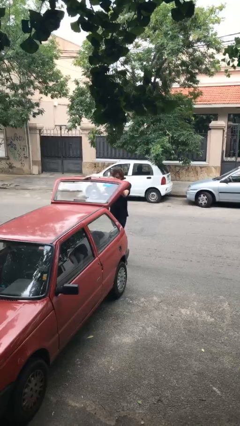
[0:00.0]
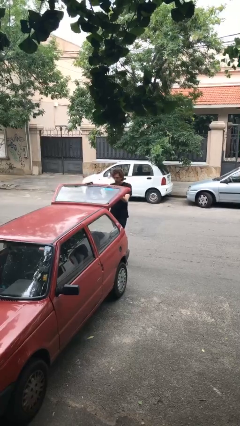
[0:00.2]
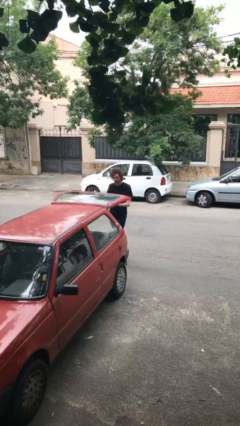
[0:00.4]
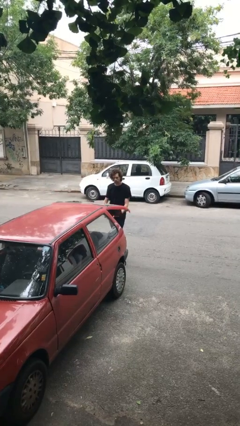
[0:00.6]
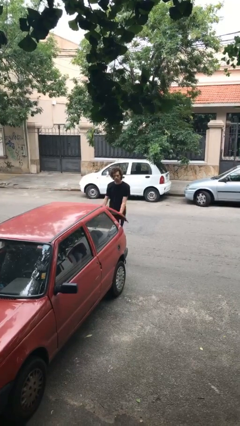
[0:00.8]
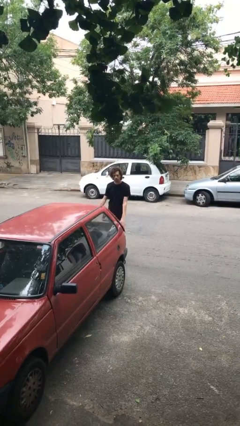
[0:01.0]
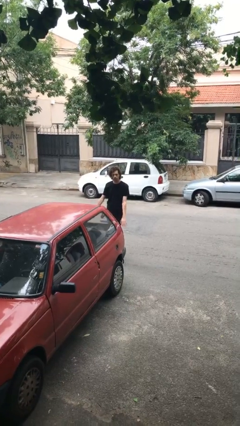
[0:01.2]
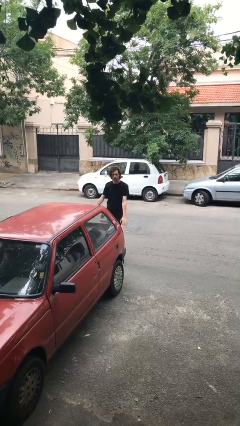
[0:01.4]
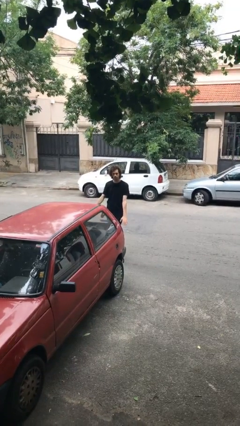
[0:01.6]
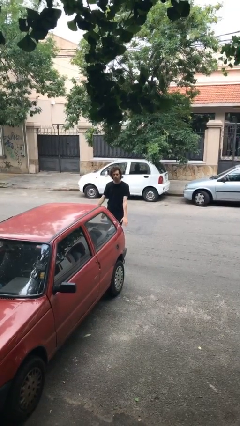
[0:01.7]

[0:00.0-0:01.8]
person closes car trunk

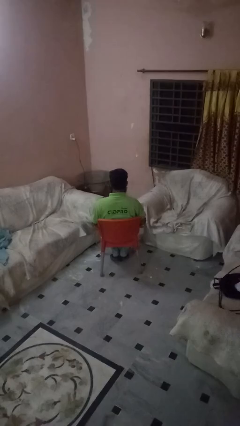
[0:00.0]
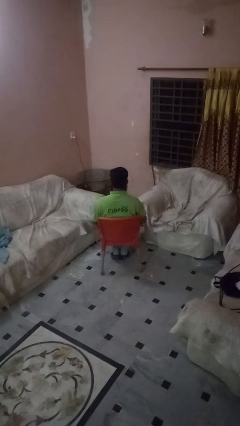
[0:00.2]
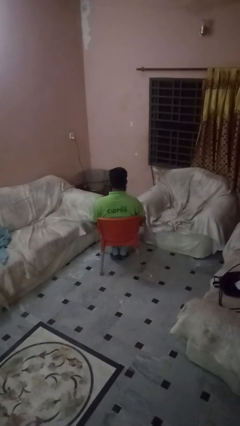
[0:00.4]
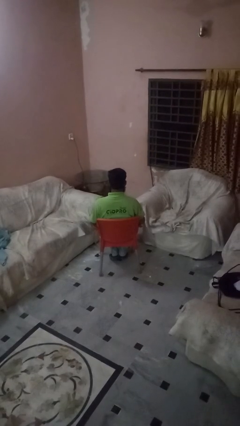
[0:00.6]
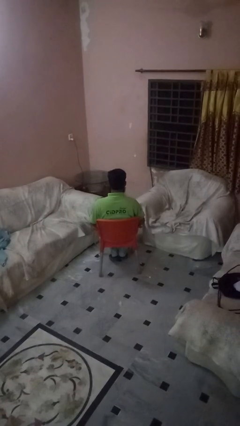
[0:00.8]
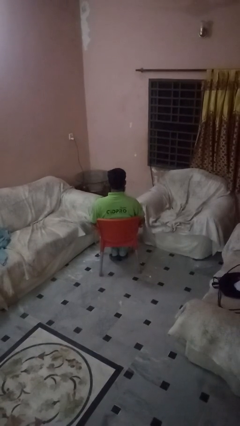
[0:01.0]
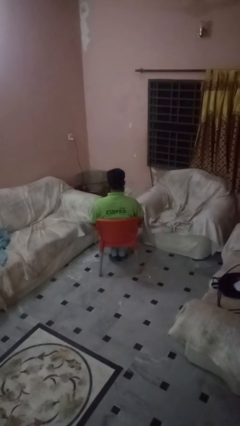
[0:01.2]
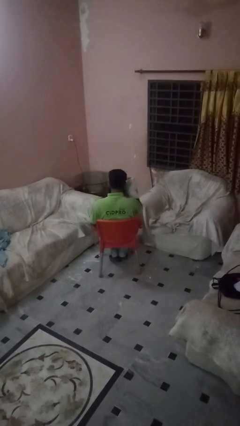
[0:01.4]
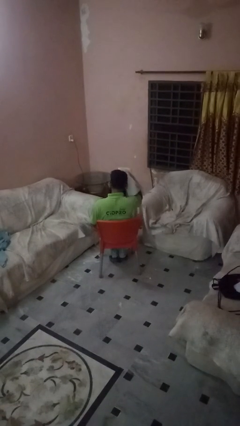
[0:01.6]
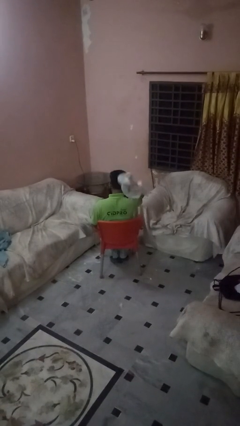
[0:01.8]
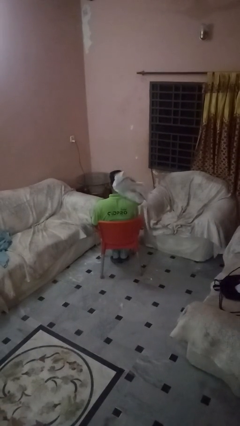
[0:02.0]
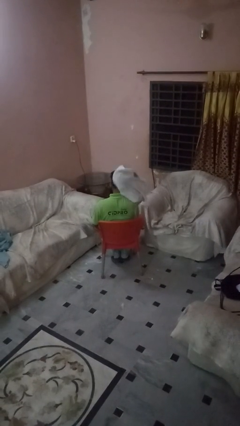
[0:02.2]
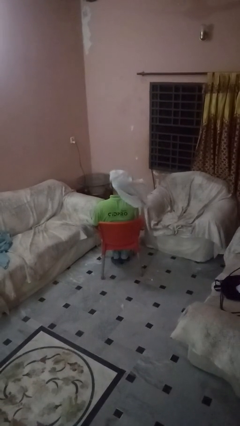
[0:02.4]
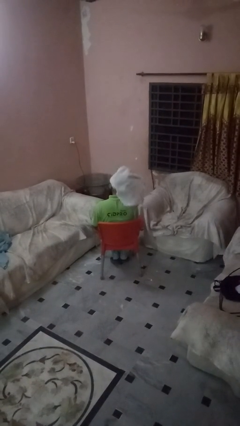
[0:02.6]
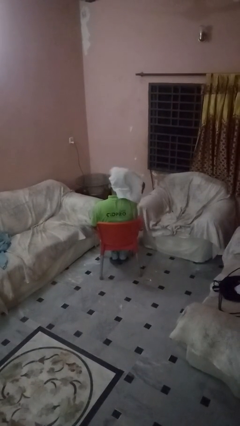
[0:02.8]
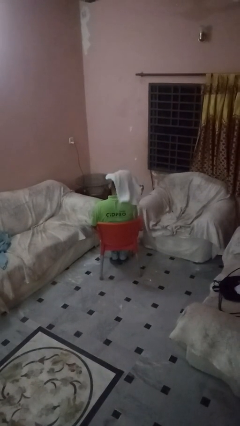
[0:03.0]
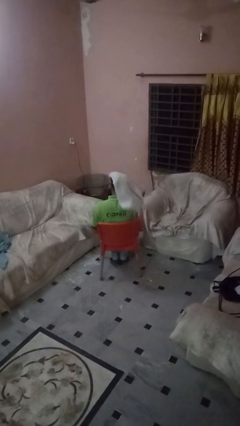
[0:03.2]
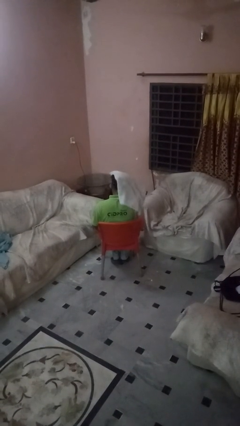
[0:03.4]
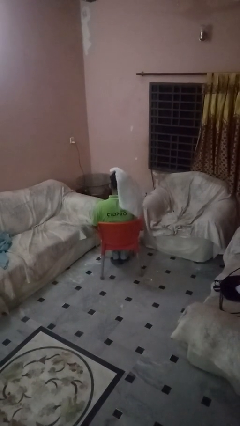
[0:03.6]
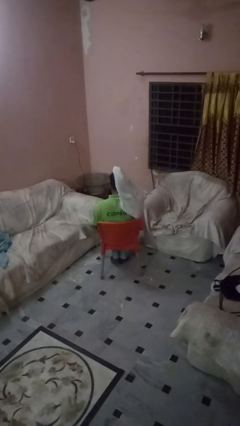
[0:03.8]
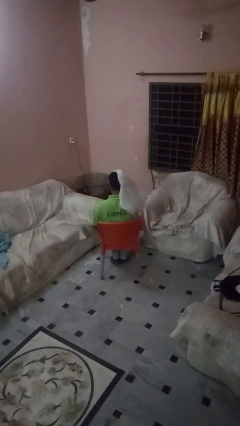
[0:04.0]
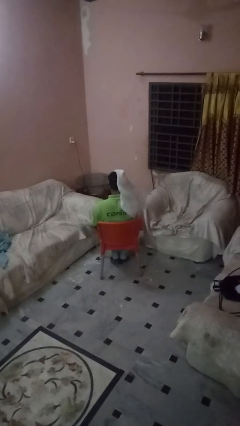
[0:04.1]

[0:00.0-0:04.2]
person dries hair with towel

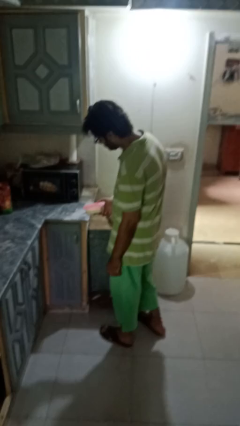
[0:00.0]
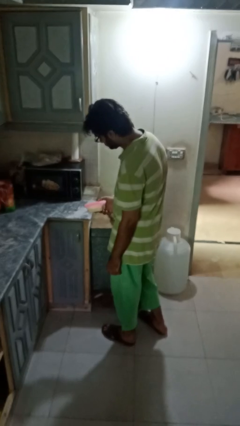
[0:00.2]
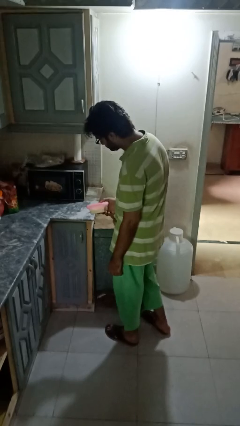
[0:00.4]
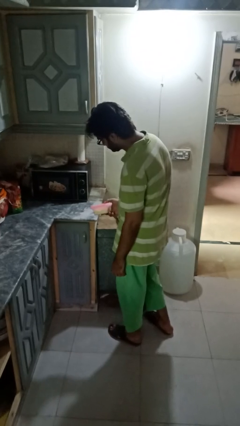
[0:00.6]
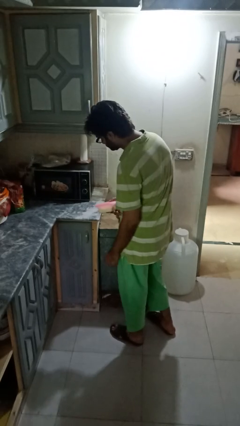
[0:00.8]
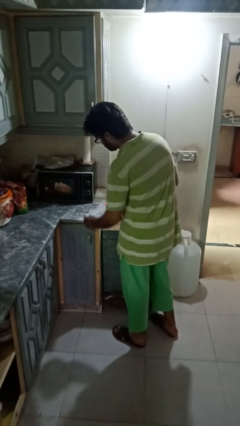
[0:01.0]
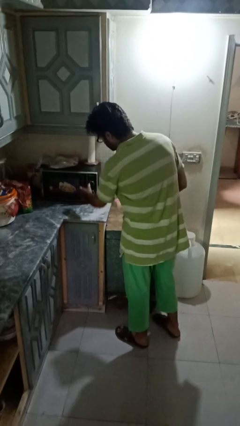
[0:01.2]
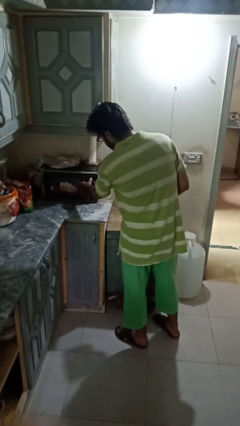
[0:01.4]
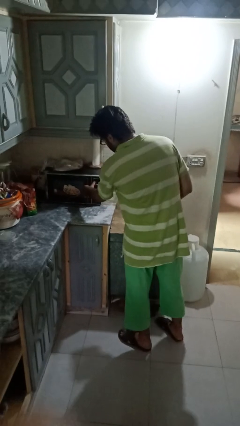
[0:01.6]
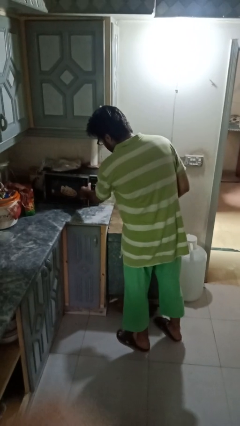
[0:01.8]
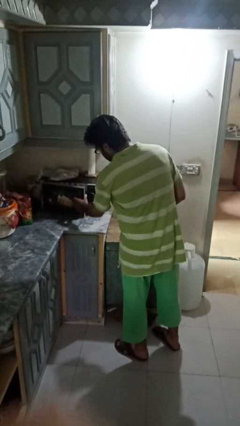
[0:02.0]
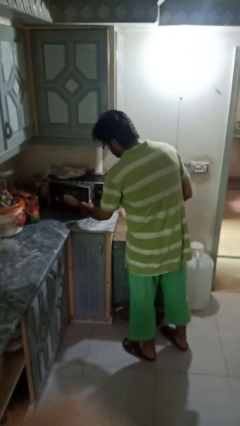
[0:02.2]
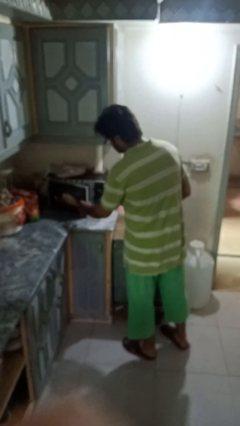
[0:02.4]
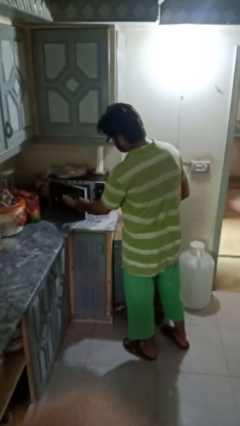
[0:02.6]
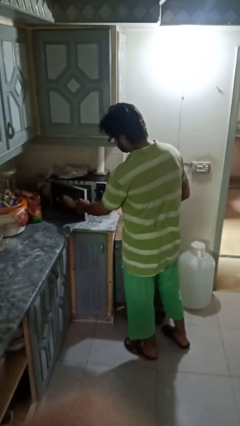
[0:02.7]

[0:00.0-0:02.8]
person opens microwave

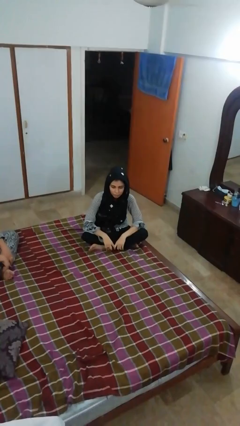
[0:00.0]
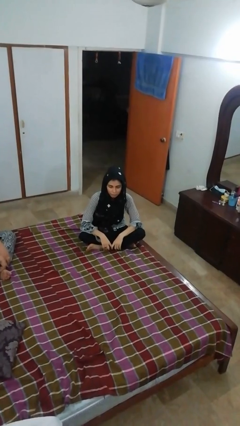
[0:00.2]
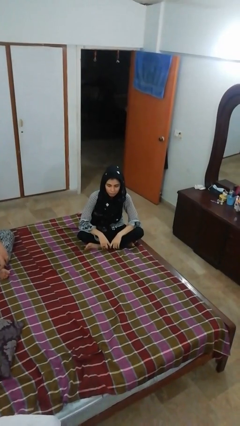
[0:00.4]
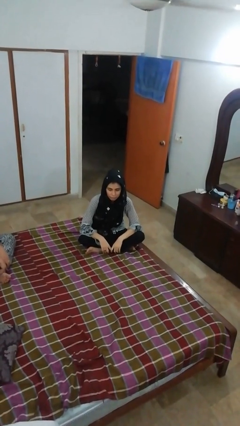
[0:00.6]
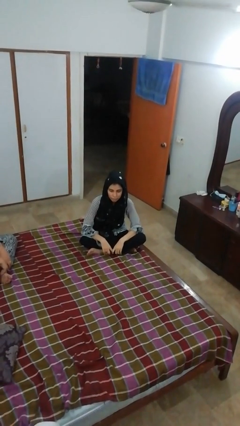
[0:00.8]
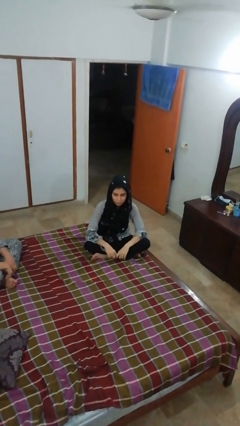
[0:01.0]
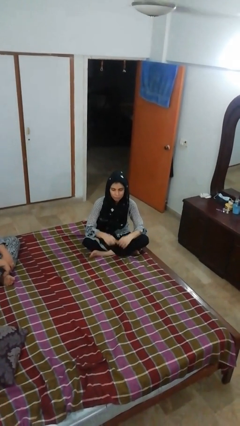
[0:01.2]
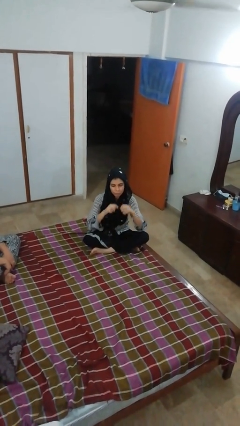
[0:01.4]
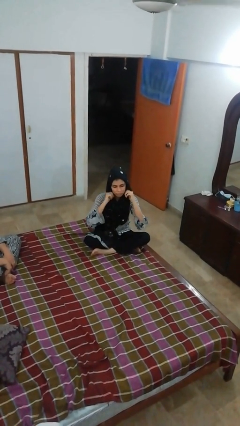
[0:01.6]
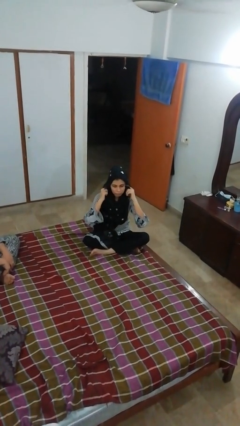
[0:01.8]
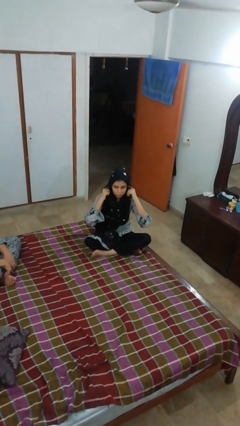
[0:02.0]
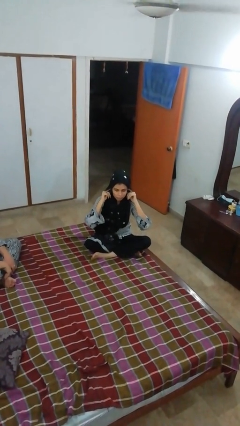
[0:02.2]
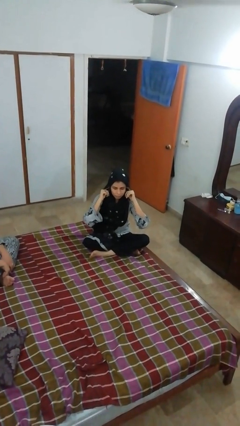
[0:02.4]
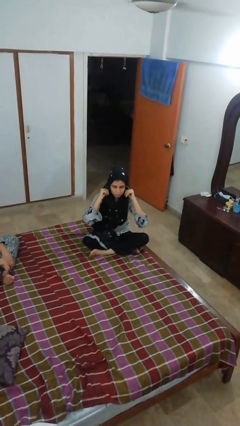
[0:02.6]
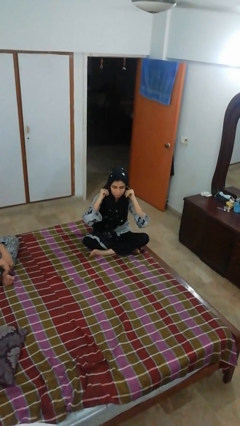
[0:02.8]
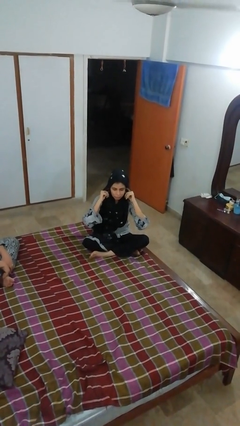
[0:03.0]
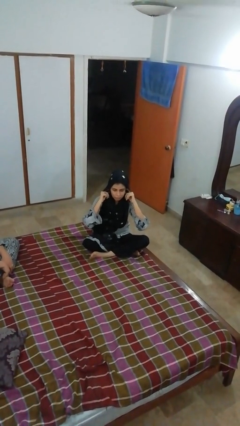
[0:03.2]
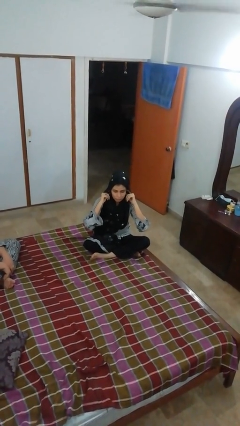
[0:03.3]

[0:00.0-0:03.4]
person puts fingers in ear

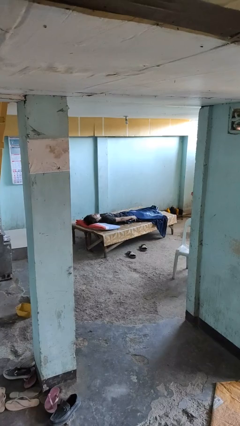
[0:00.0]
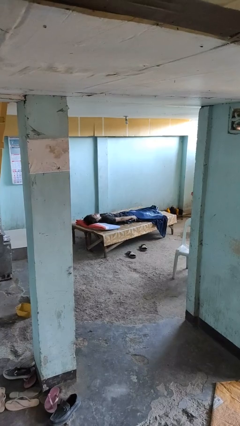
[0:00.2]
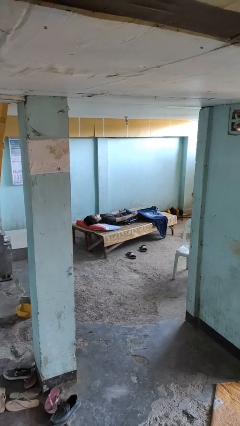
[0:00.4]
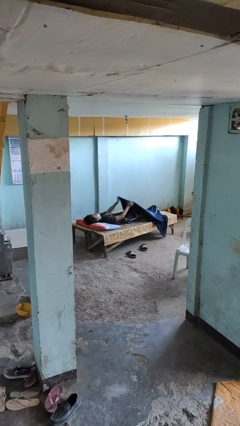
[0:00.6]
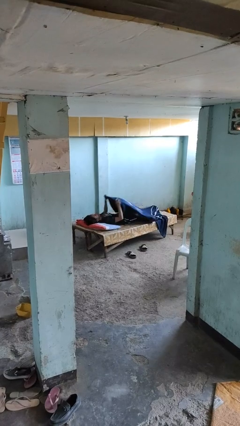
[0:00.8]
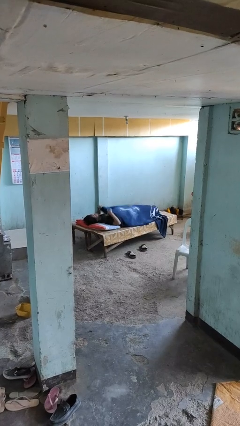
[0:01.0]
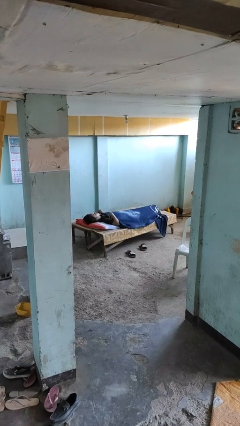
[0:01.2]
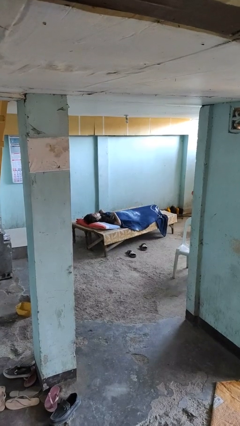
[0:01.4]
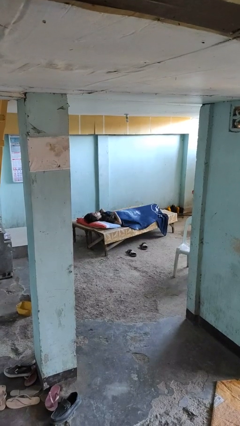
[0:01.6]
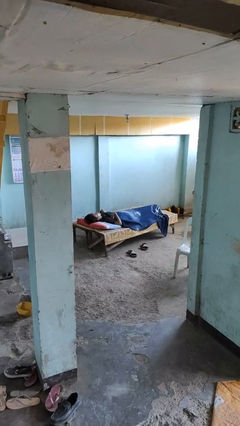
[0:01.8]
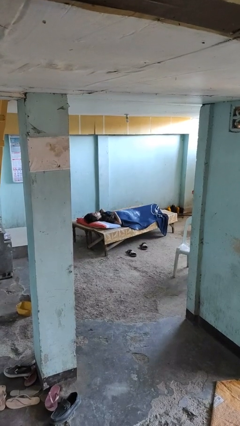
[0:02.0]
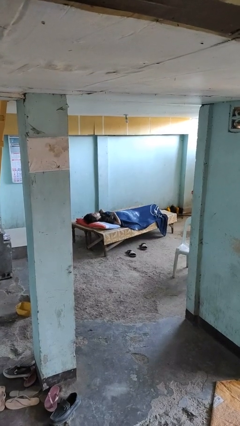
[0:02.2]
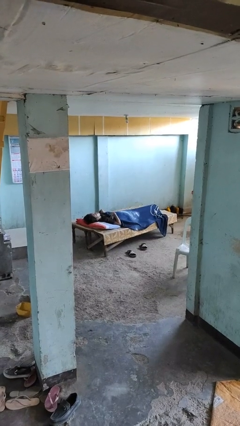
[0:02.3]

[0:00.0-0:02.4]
person covers with blanket

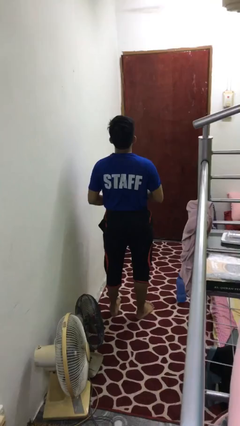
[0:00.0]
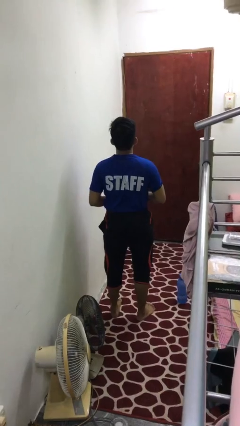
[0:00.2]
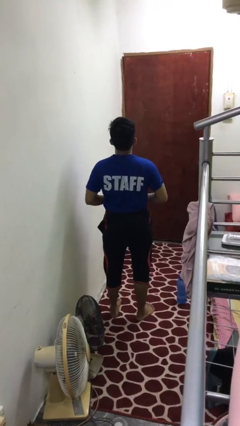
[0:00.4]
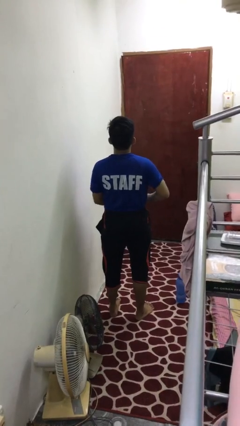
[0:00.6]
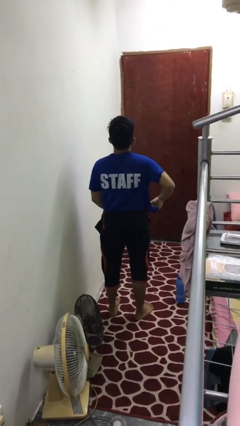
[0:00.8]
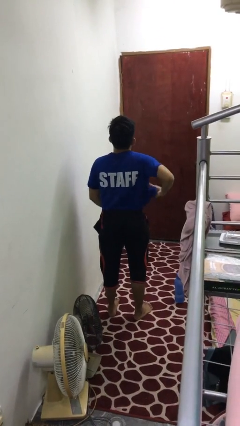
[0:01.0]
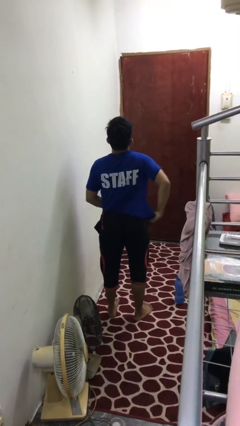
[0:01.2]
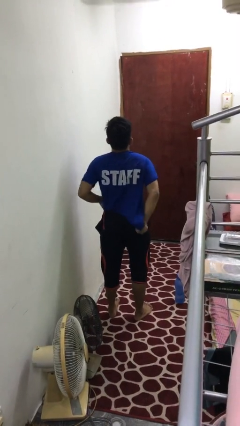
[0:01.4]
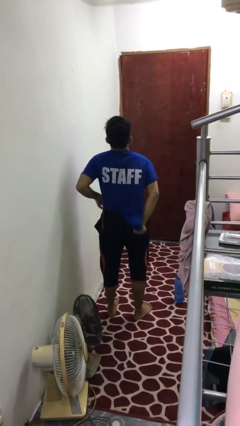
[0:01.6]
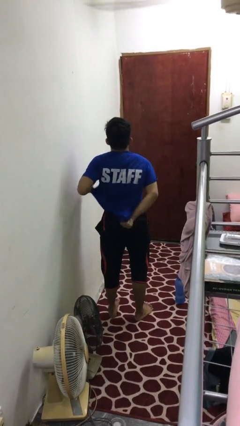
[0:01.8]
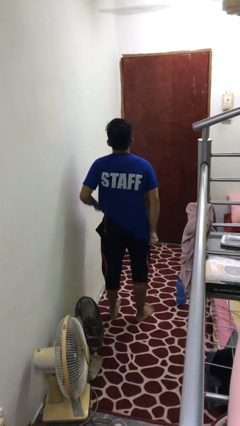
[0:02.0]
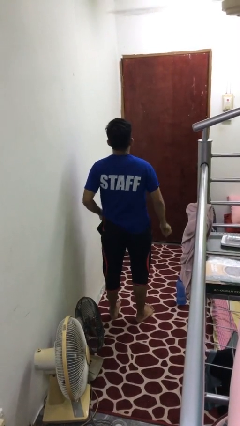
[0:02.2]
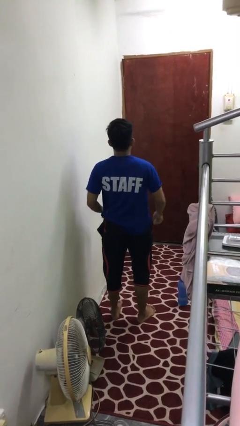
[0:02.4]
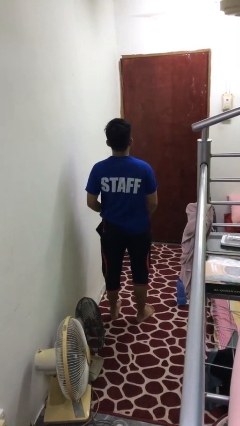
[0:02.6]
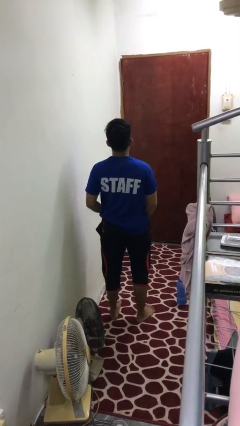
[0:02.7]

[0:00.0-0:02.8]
person untucks shirt
